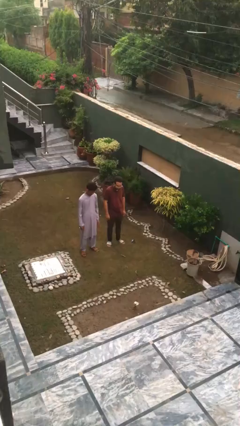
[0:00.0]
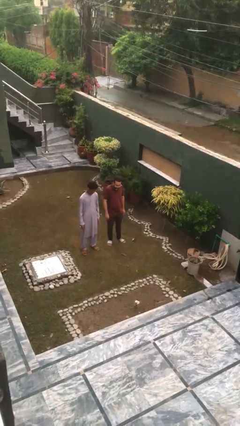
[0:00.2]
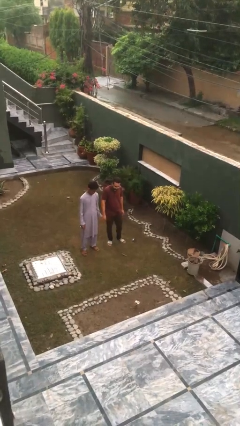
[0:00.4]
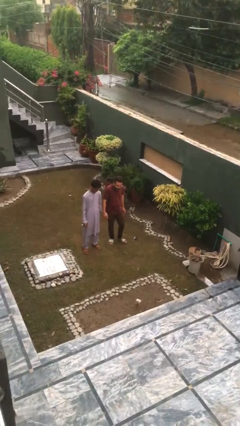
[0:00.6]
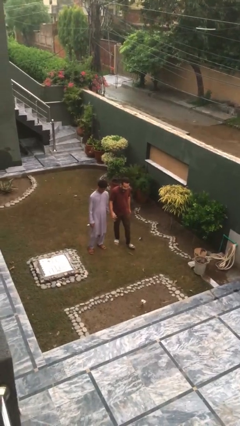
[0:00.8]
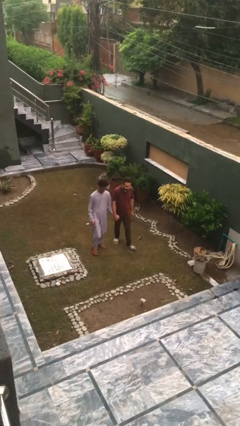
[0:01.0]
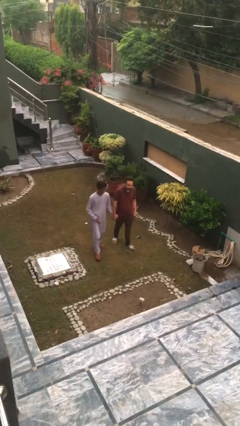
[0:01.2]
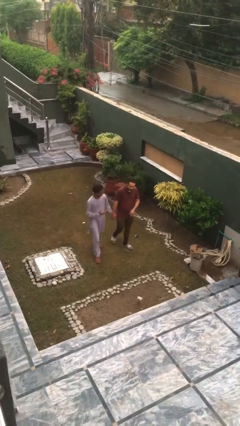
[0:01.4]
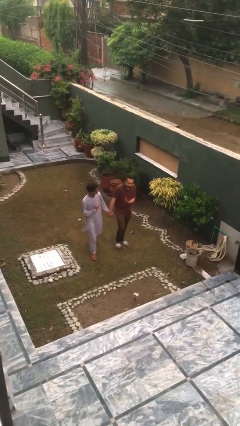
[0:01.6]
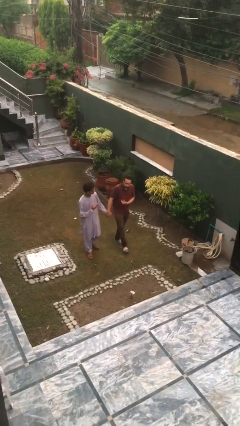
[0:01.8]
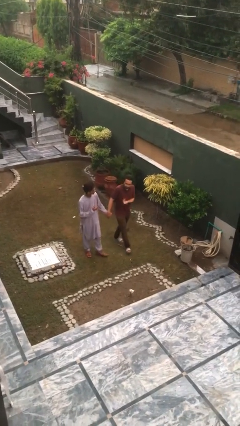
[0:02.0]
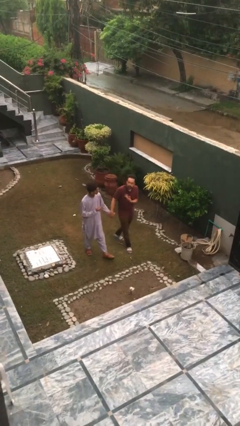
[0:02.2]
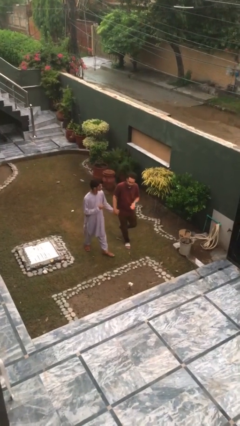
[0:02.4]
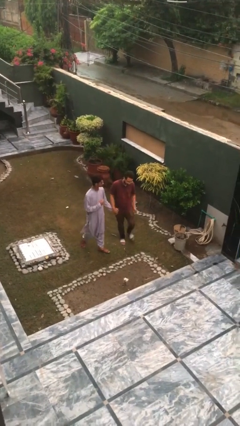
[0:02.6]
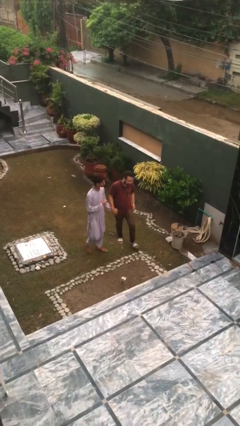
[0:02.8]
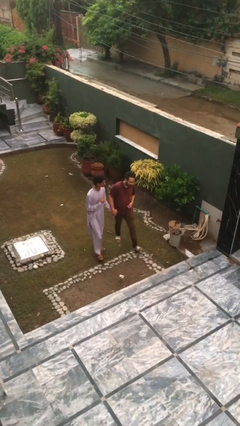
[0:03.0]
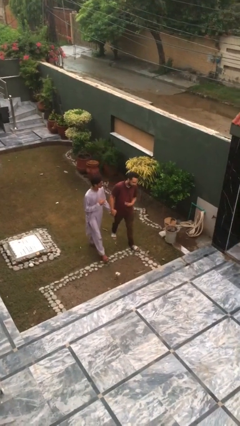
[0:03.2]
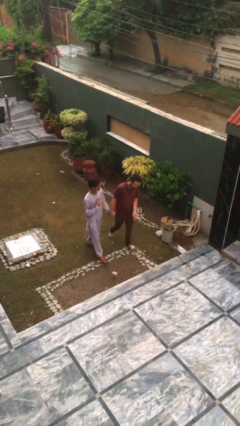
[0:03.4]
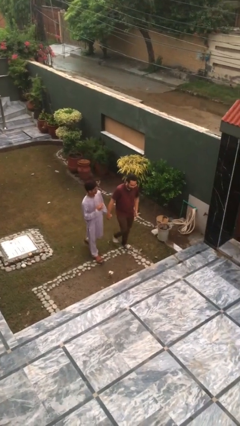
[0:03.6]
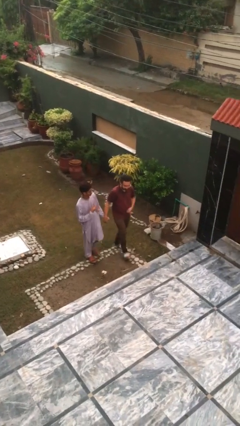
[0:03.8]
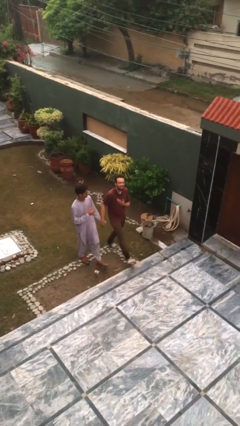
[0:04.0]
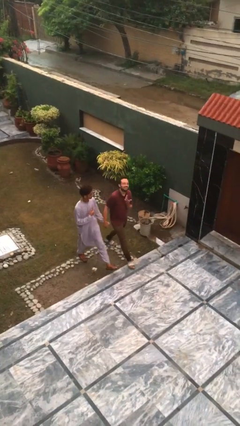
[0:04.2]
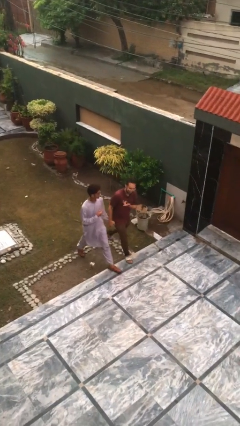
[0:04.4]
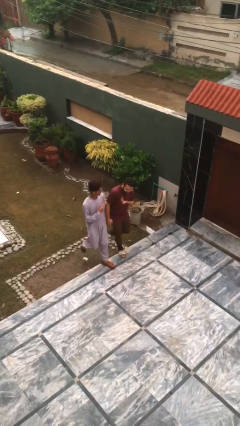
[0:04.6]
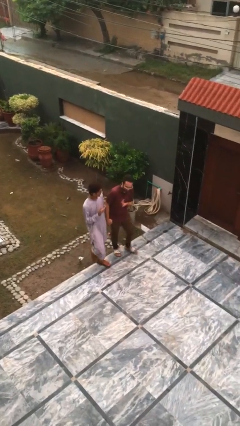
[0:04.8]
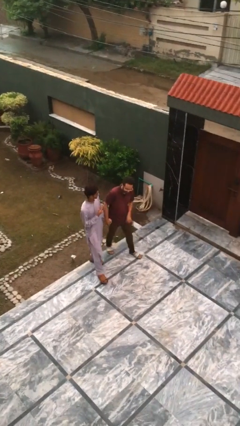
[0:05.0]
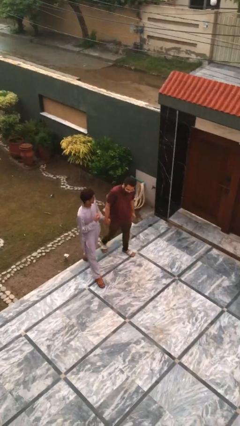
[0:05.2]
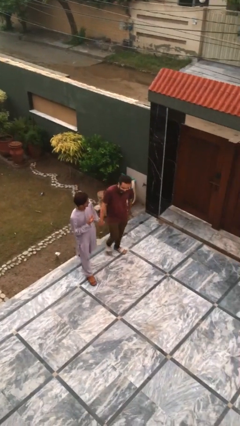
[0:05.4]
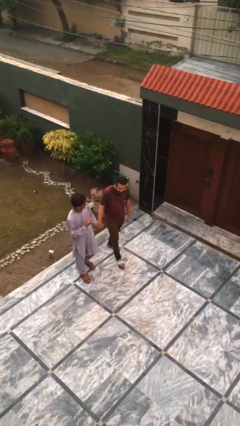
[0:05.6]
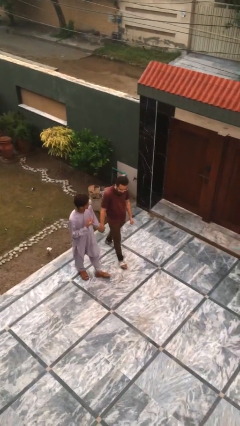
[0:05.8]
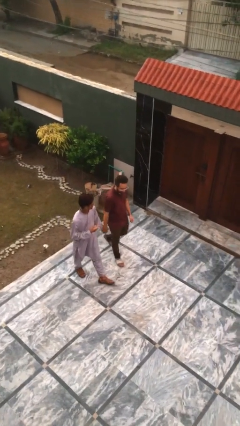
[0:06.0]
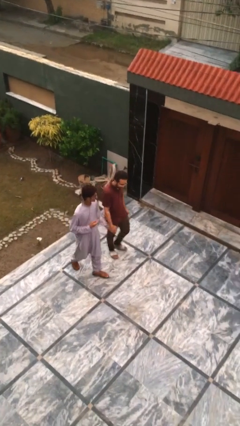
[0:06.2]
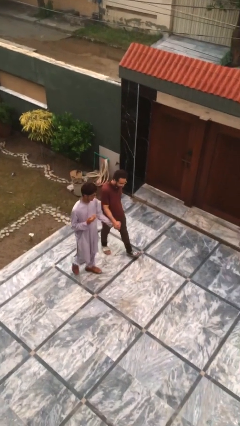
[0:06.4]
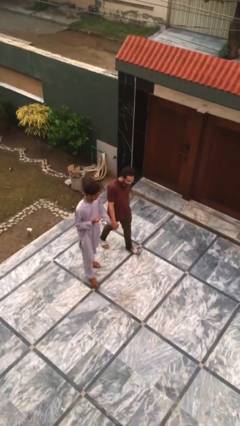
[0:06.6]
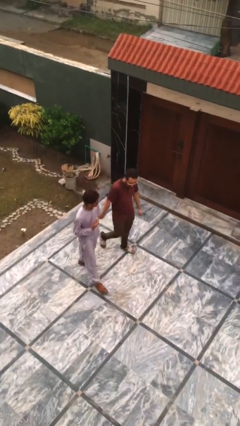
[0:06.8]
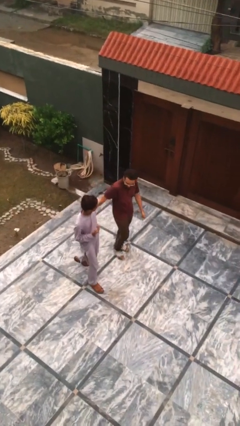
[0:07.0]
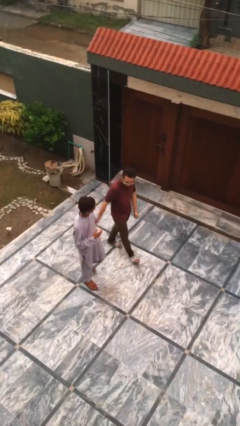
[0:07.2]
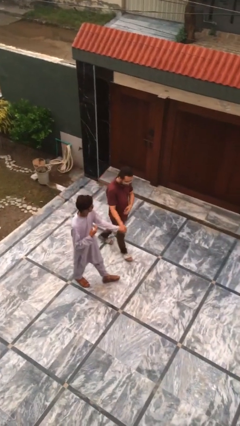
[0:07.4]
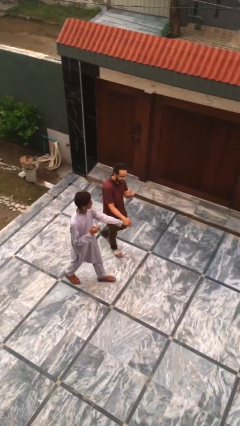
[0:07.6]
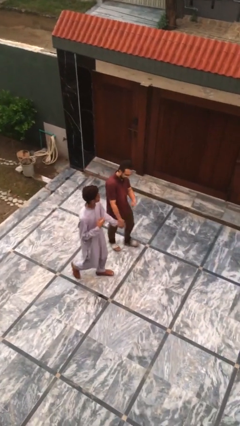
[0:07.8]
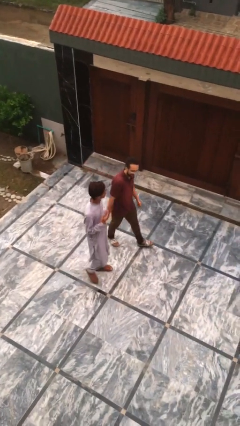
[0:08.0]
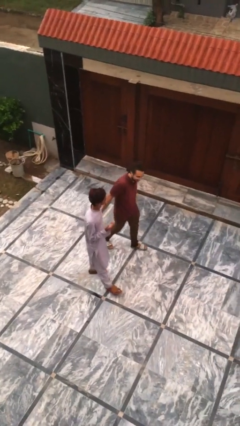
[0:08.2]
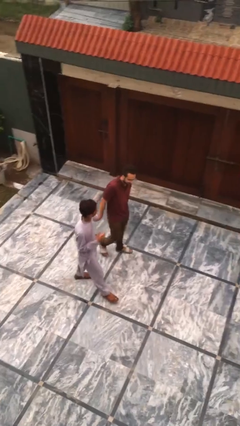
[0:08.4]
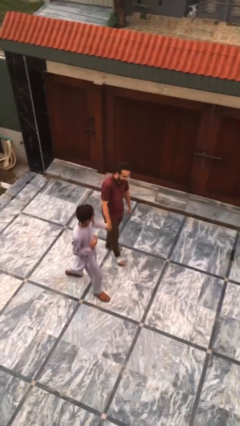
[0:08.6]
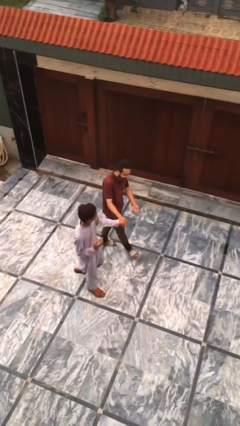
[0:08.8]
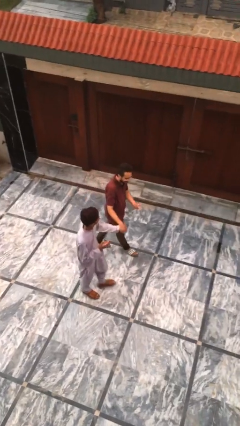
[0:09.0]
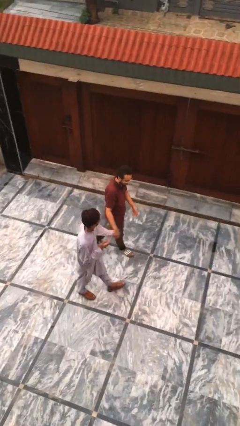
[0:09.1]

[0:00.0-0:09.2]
person holds hand

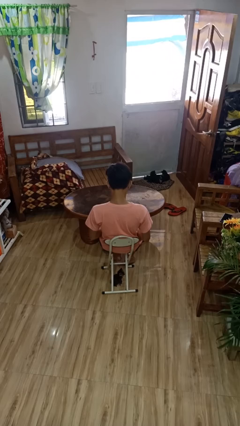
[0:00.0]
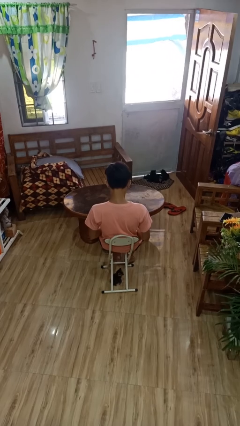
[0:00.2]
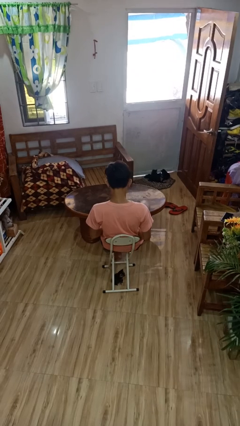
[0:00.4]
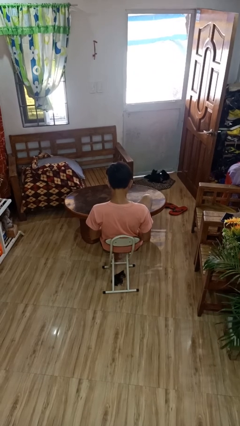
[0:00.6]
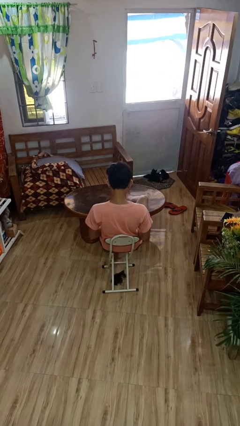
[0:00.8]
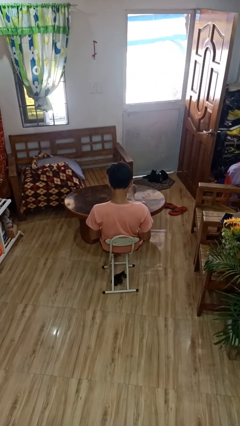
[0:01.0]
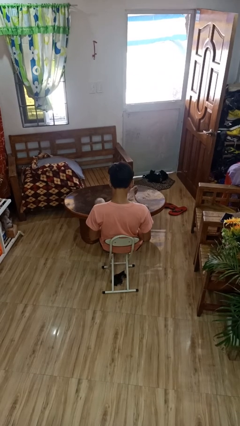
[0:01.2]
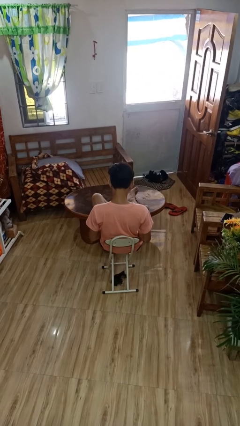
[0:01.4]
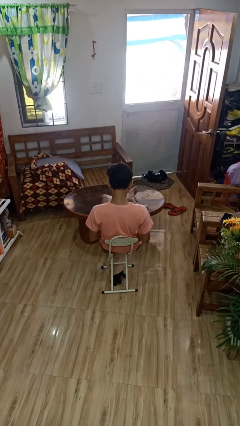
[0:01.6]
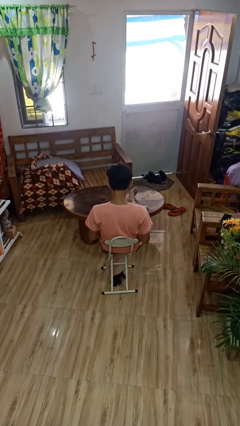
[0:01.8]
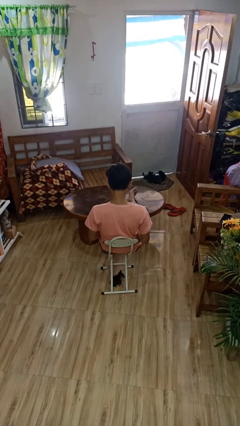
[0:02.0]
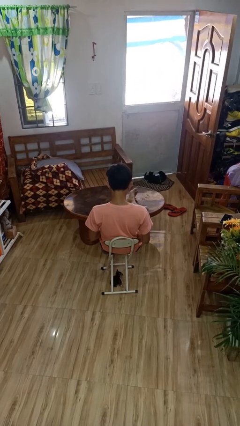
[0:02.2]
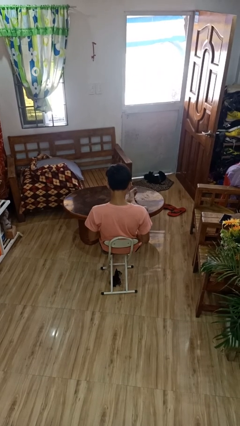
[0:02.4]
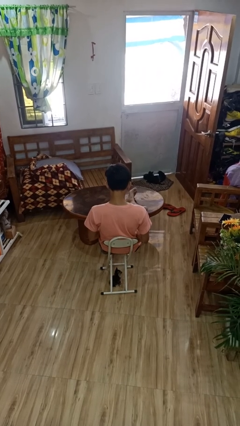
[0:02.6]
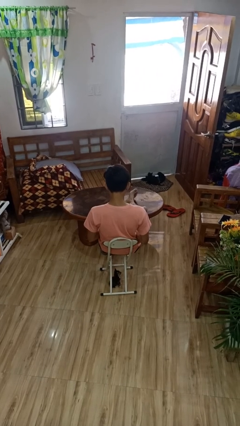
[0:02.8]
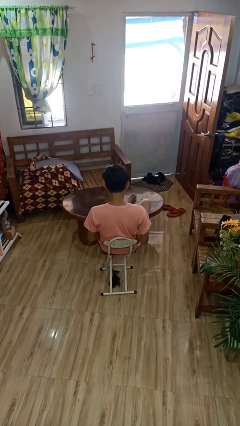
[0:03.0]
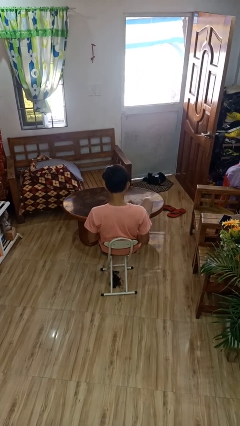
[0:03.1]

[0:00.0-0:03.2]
person puts feet up

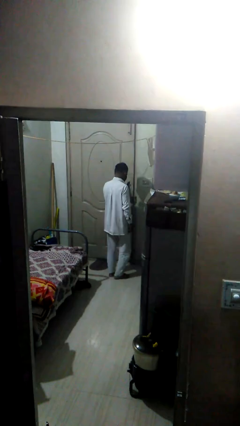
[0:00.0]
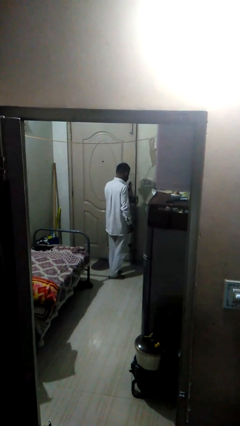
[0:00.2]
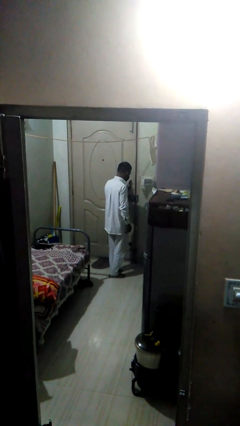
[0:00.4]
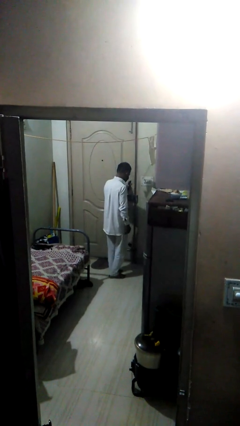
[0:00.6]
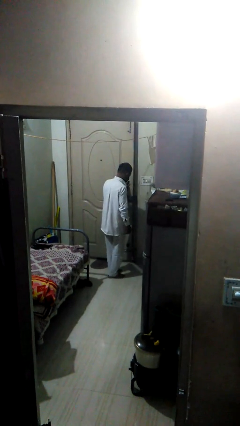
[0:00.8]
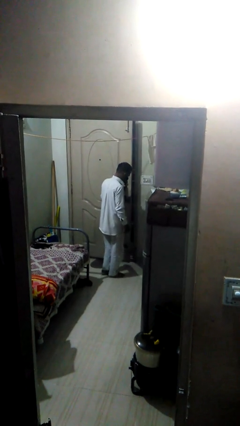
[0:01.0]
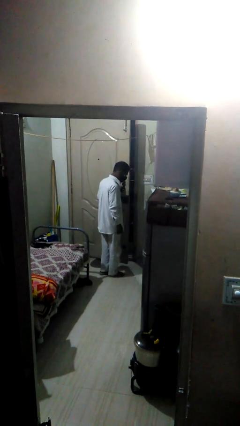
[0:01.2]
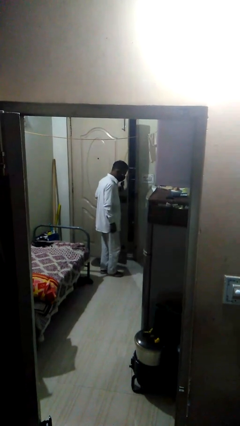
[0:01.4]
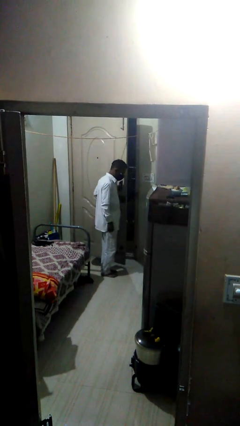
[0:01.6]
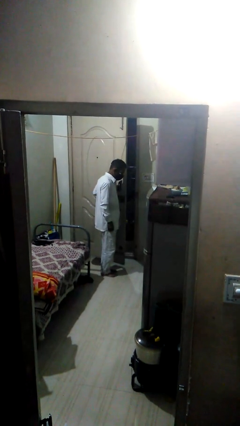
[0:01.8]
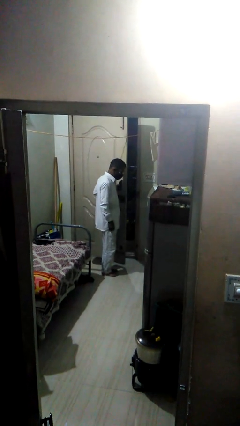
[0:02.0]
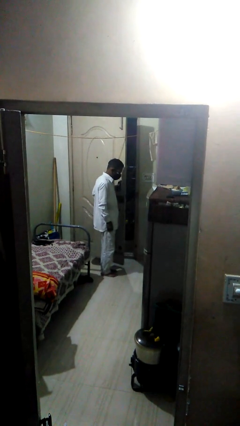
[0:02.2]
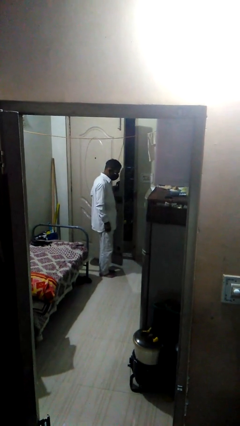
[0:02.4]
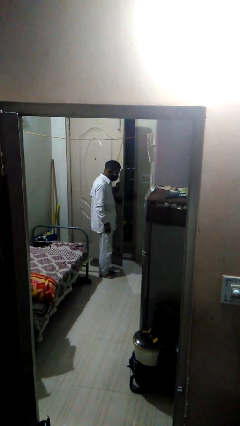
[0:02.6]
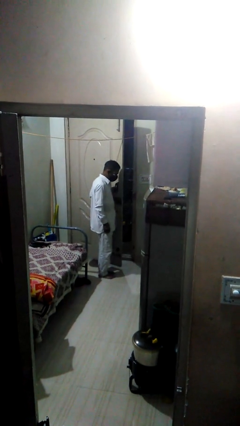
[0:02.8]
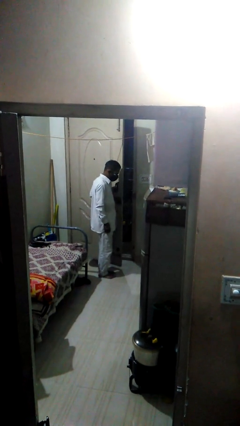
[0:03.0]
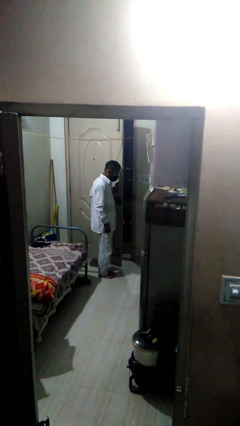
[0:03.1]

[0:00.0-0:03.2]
person opens facility door

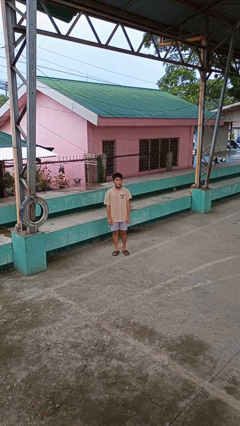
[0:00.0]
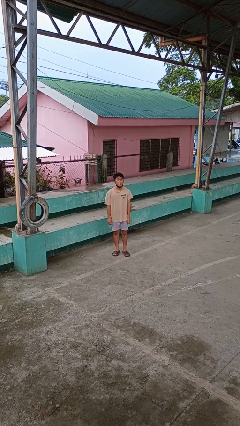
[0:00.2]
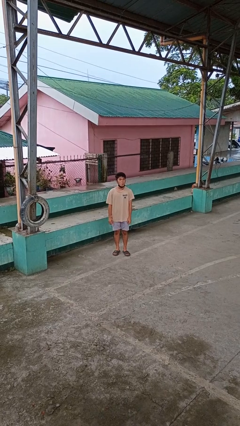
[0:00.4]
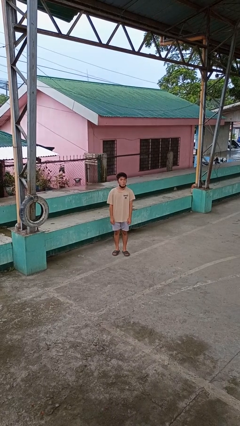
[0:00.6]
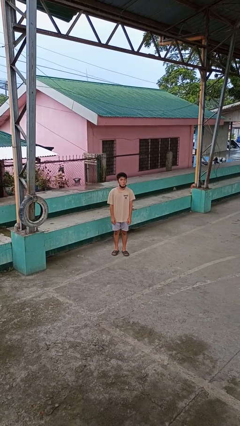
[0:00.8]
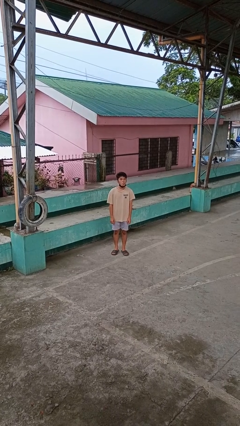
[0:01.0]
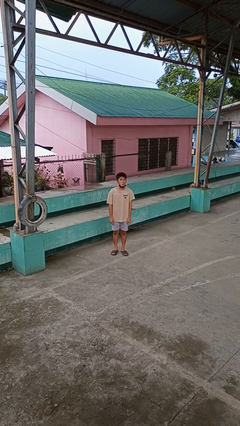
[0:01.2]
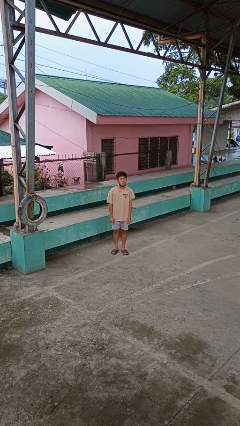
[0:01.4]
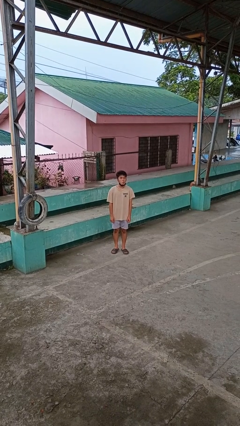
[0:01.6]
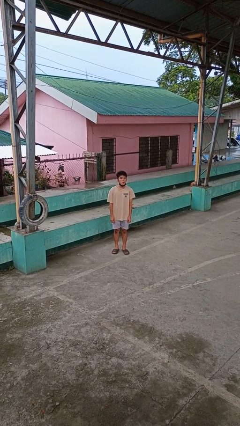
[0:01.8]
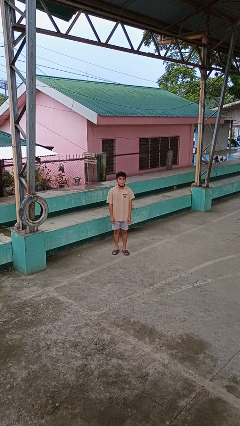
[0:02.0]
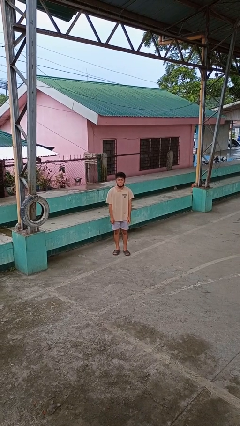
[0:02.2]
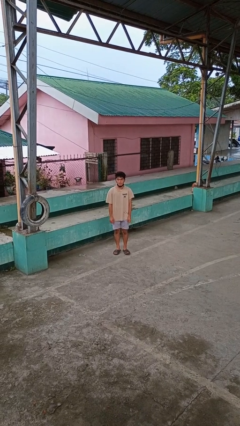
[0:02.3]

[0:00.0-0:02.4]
person sticks out tongue
